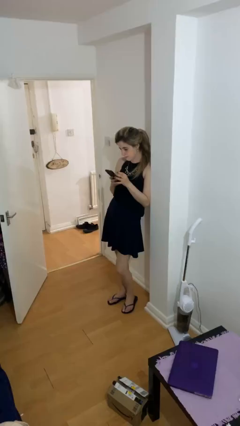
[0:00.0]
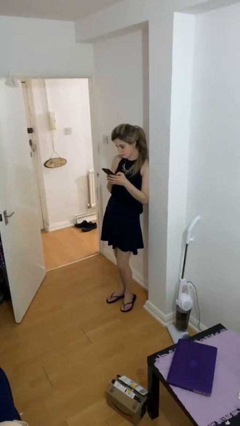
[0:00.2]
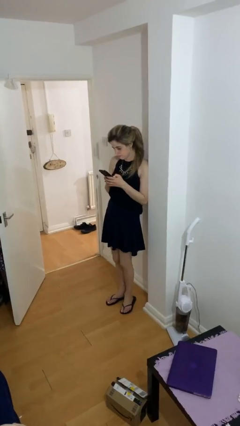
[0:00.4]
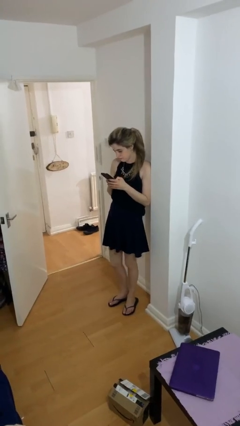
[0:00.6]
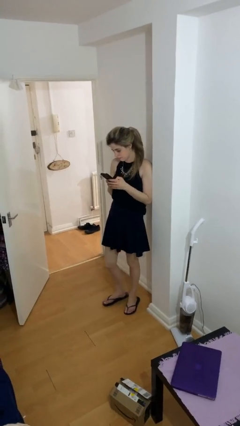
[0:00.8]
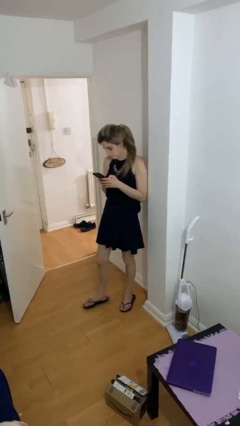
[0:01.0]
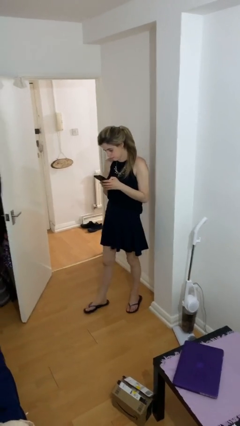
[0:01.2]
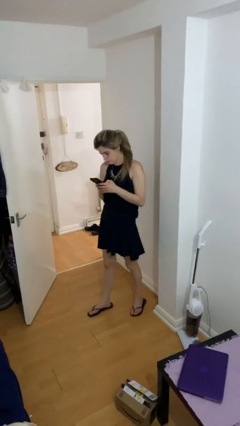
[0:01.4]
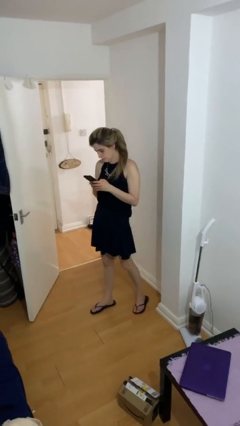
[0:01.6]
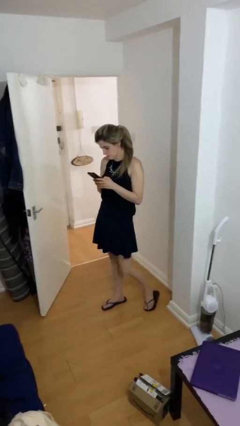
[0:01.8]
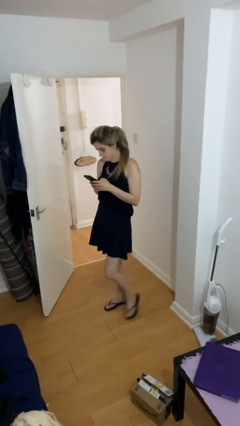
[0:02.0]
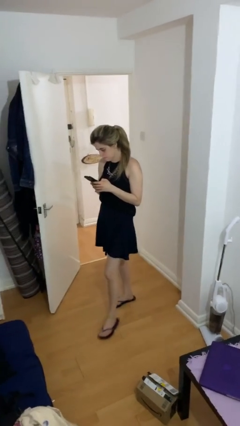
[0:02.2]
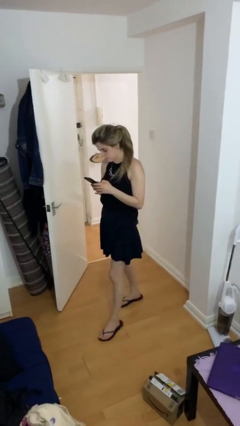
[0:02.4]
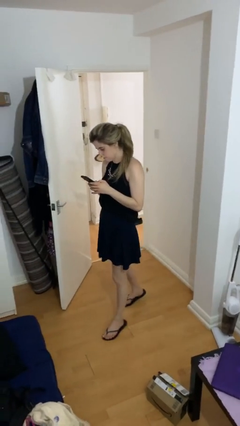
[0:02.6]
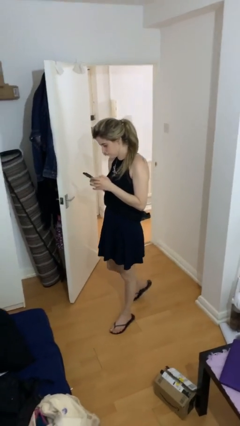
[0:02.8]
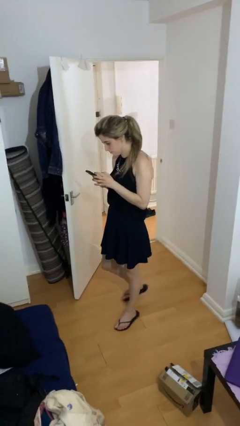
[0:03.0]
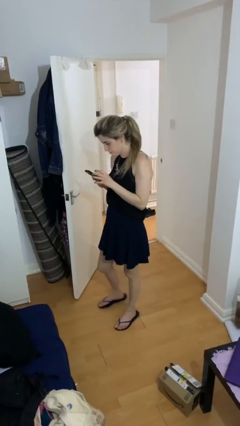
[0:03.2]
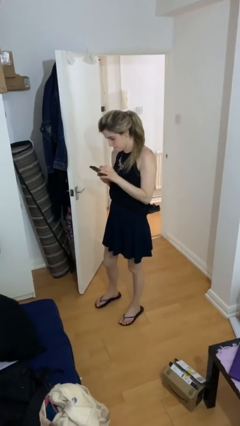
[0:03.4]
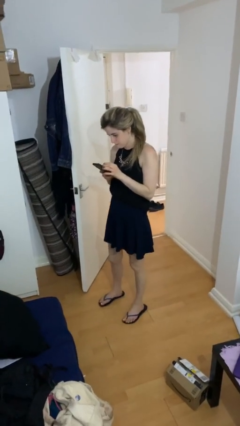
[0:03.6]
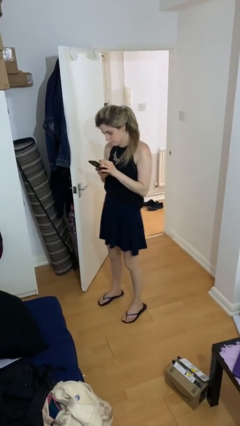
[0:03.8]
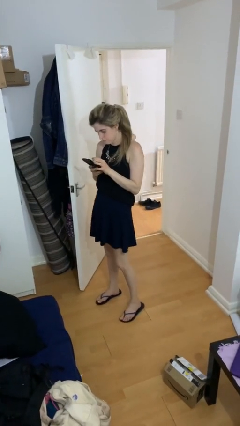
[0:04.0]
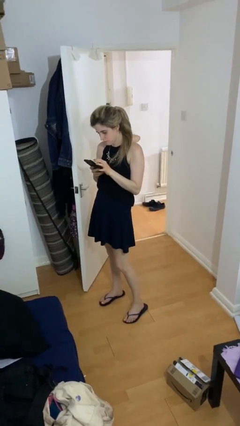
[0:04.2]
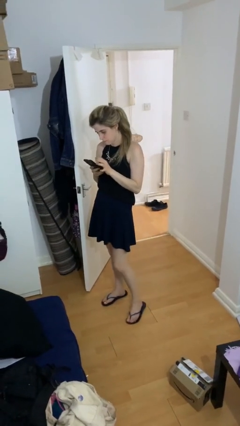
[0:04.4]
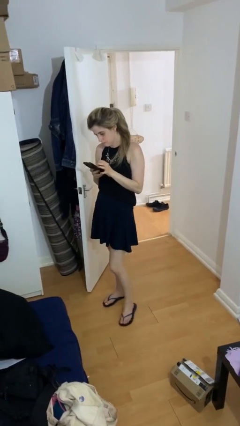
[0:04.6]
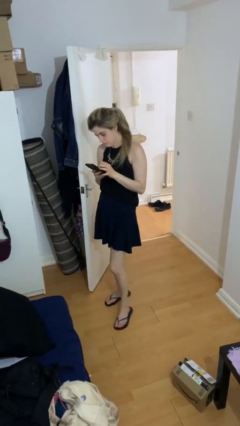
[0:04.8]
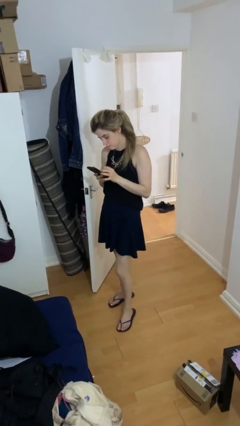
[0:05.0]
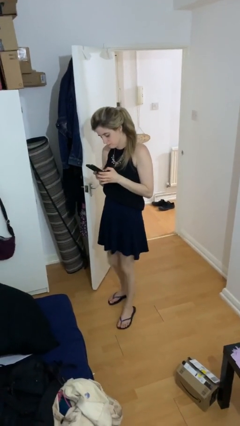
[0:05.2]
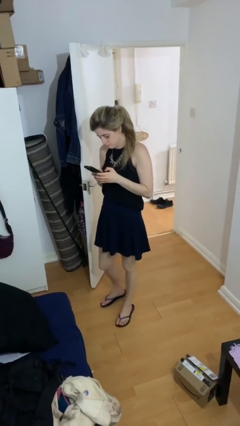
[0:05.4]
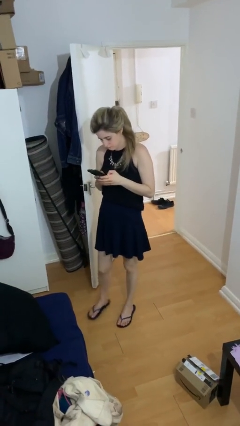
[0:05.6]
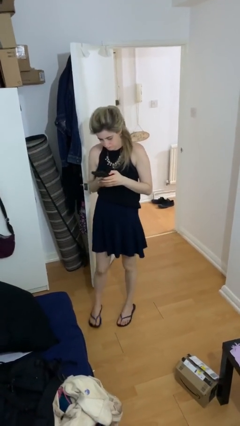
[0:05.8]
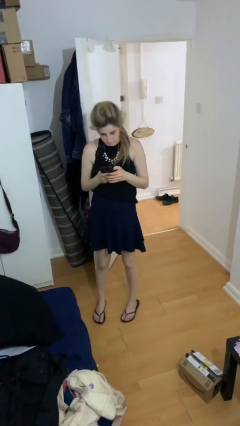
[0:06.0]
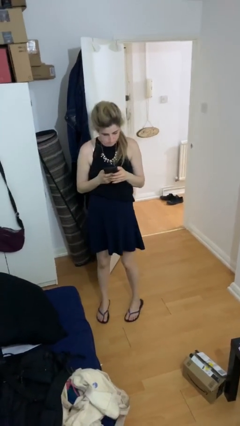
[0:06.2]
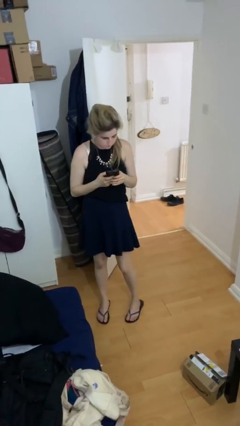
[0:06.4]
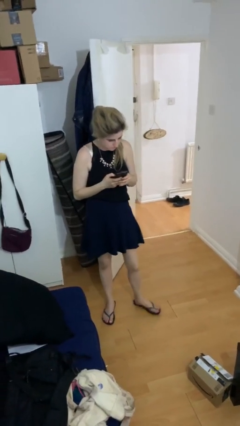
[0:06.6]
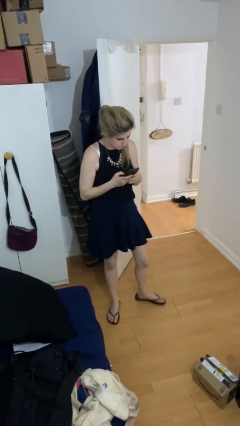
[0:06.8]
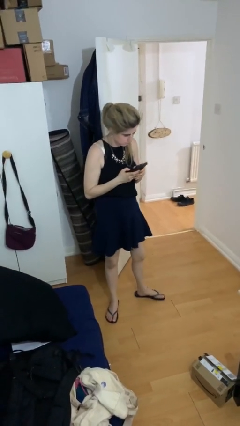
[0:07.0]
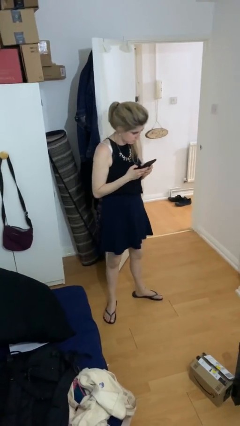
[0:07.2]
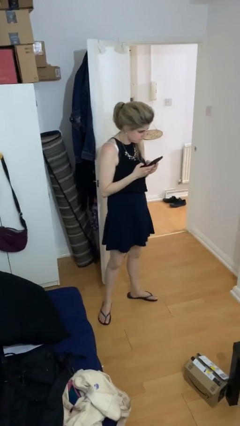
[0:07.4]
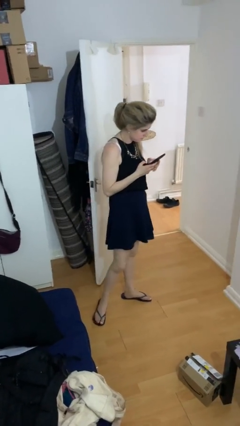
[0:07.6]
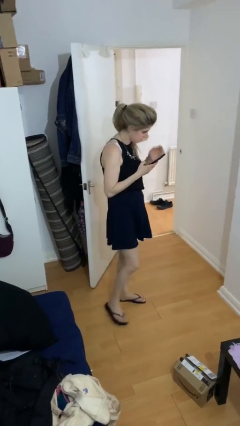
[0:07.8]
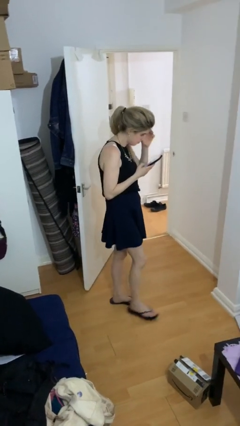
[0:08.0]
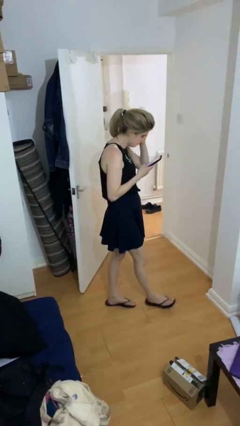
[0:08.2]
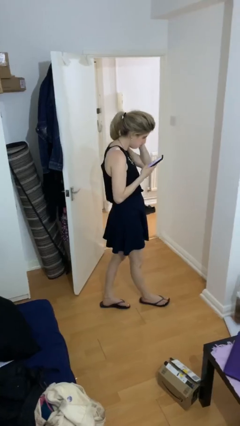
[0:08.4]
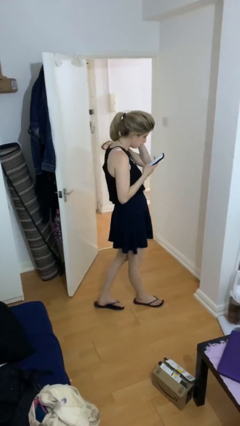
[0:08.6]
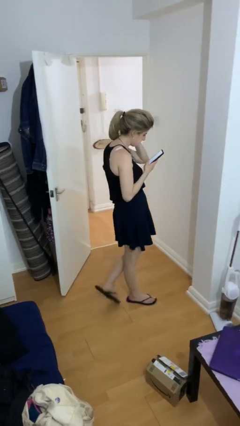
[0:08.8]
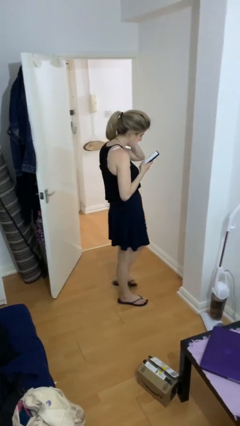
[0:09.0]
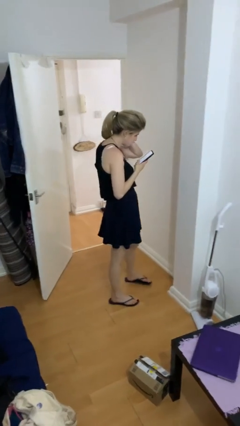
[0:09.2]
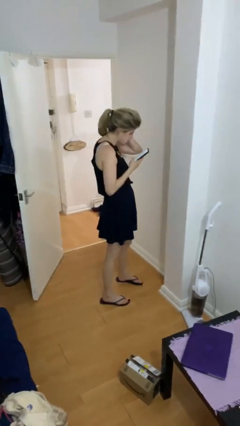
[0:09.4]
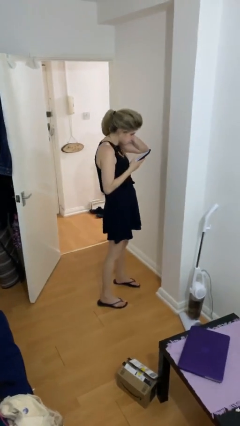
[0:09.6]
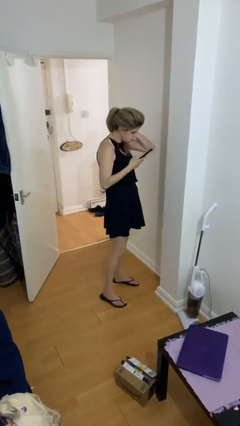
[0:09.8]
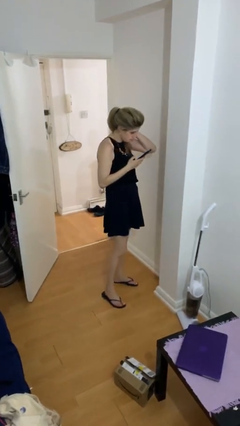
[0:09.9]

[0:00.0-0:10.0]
person texts on phone

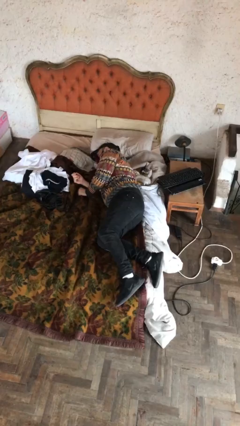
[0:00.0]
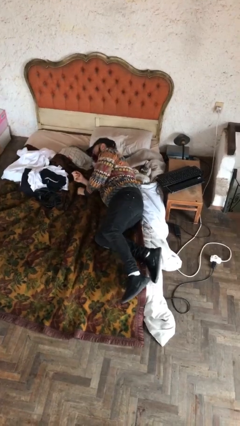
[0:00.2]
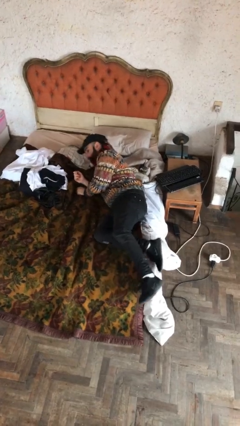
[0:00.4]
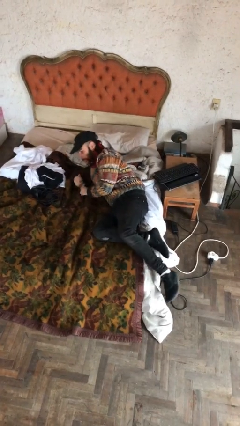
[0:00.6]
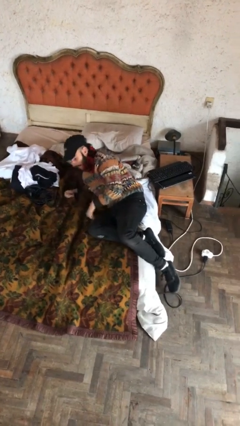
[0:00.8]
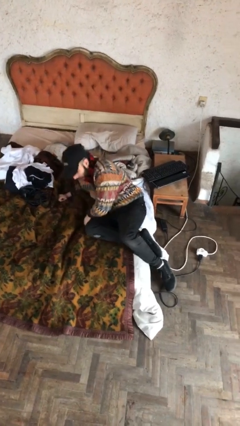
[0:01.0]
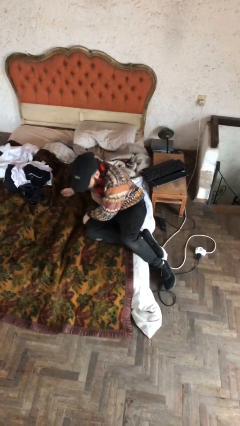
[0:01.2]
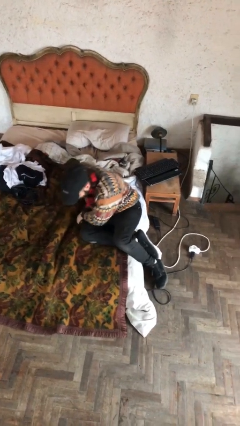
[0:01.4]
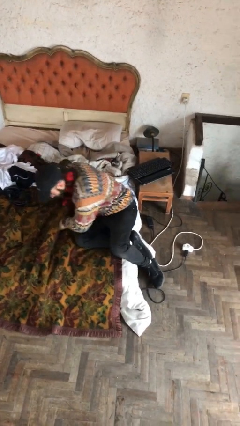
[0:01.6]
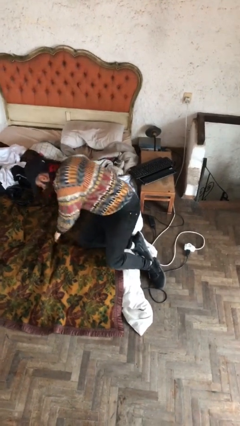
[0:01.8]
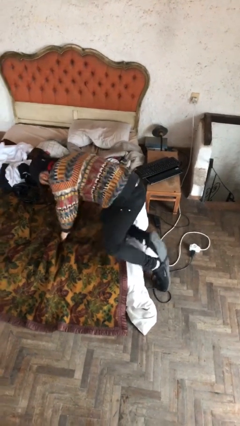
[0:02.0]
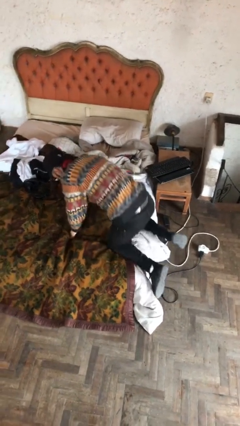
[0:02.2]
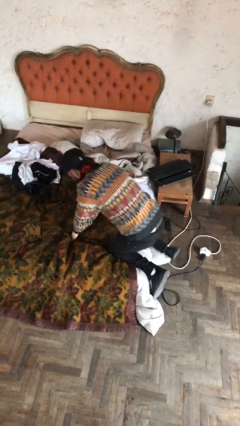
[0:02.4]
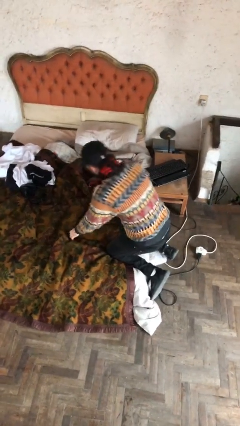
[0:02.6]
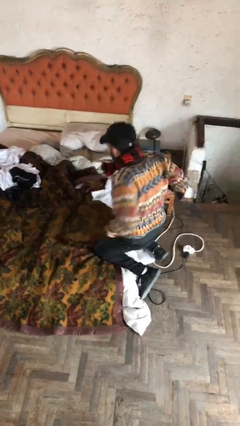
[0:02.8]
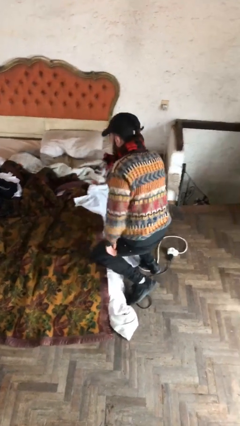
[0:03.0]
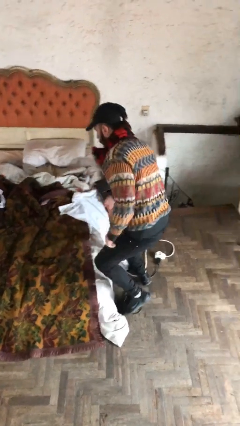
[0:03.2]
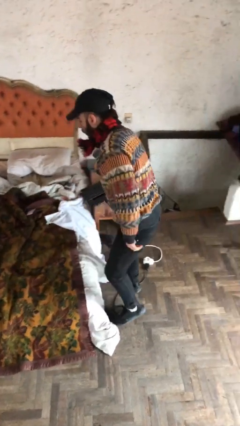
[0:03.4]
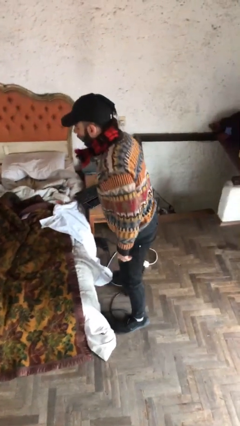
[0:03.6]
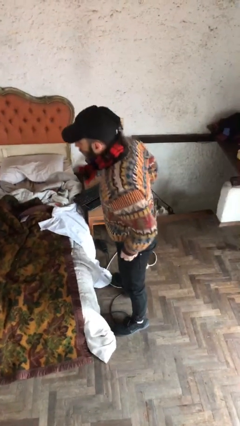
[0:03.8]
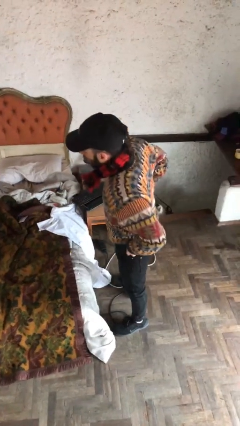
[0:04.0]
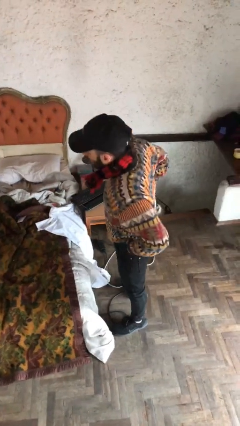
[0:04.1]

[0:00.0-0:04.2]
person stands up

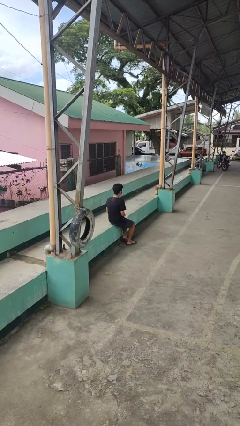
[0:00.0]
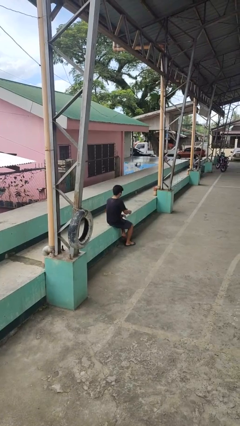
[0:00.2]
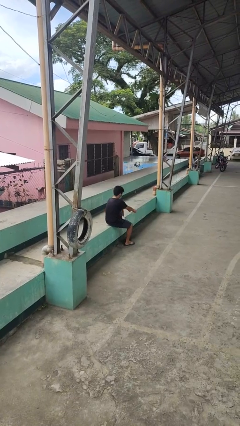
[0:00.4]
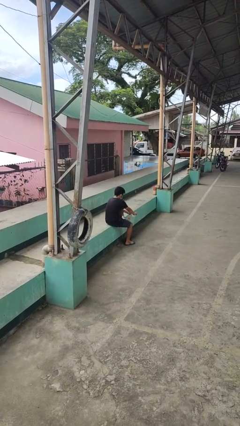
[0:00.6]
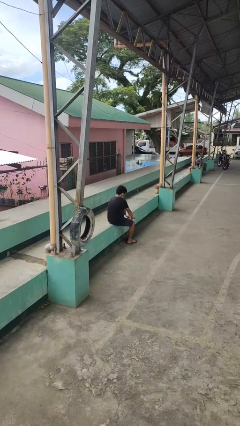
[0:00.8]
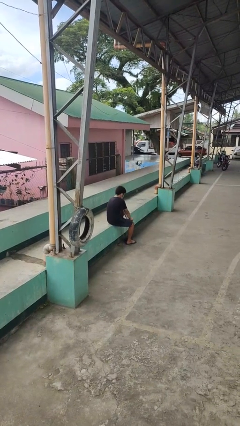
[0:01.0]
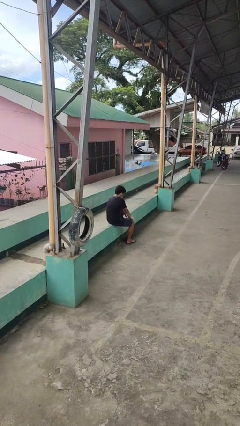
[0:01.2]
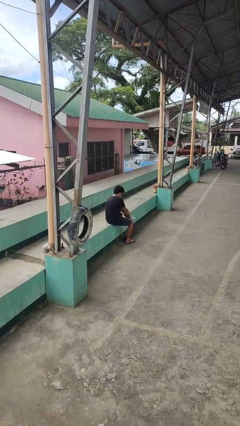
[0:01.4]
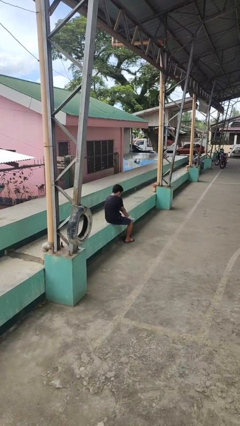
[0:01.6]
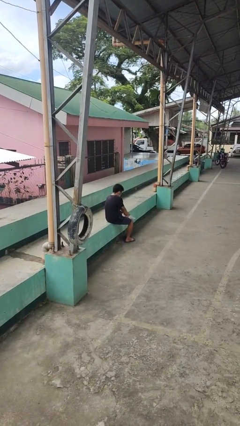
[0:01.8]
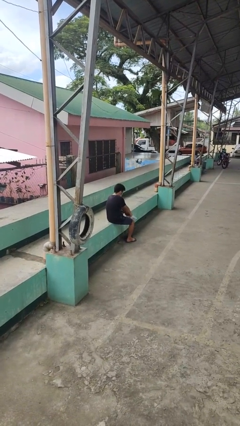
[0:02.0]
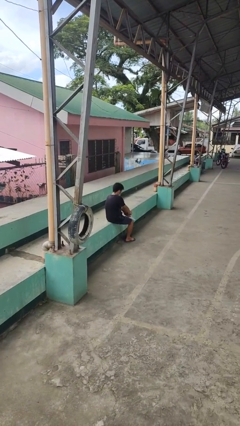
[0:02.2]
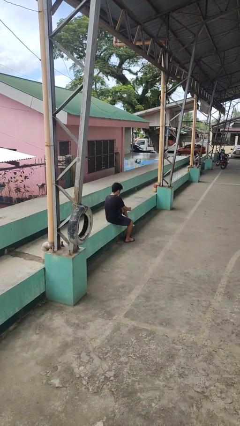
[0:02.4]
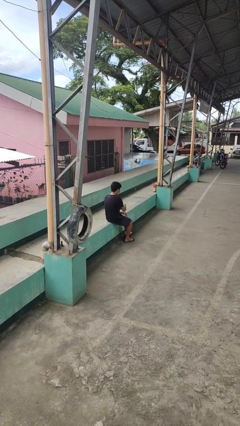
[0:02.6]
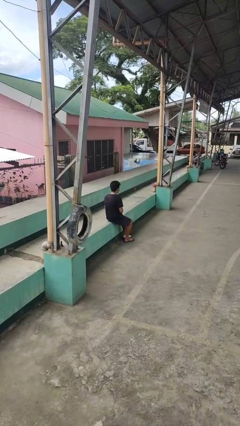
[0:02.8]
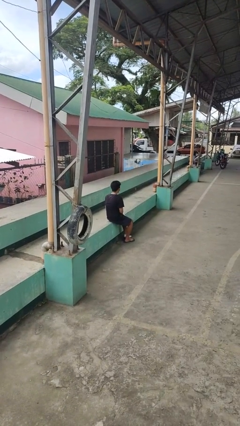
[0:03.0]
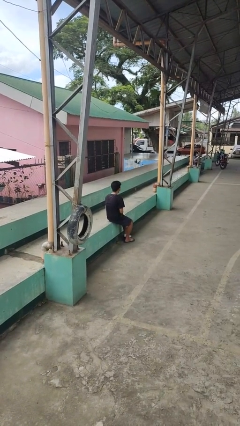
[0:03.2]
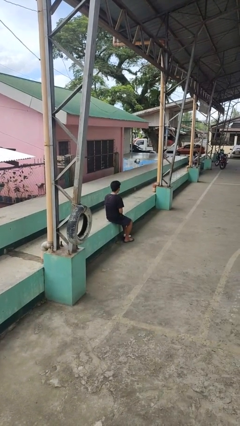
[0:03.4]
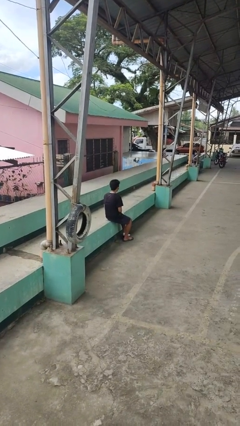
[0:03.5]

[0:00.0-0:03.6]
person puts on socks
